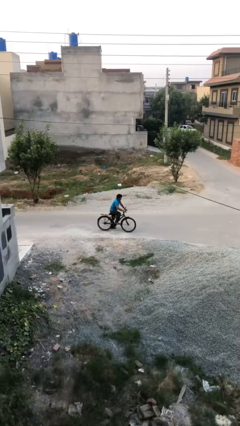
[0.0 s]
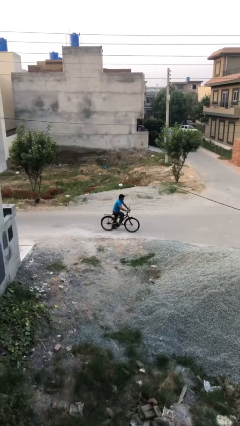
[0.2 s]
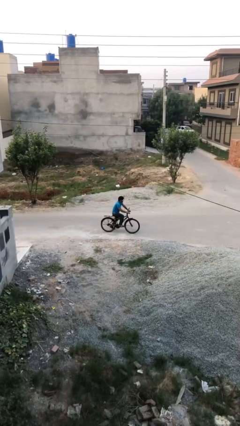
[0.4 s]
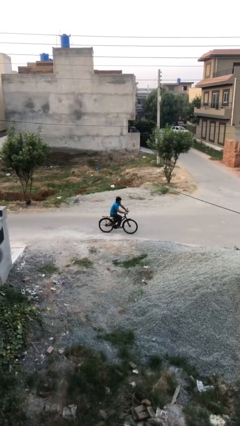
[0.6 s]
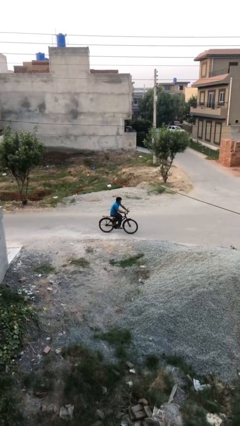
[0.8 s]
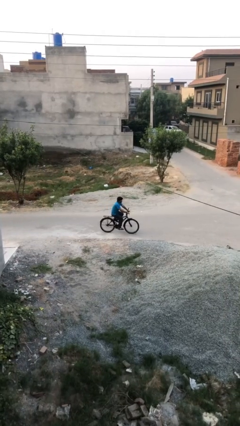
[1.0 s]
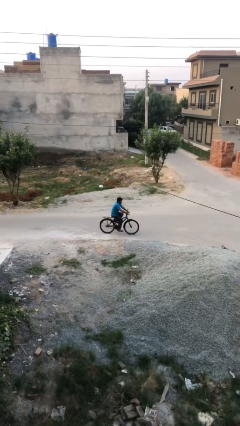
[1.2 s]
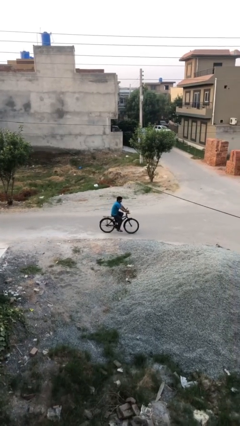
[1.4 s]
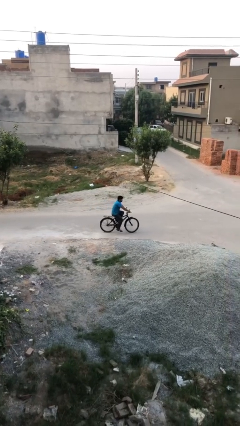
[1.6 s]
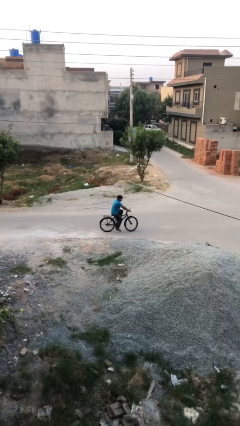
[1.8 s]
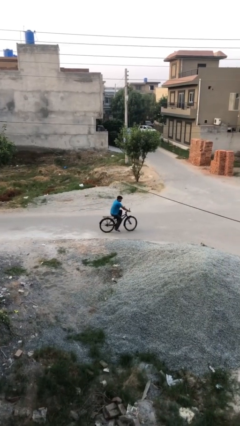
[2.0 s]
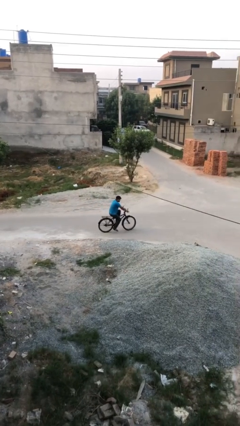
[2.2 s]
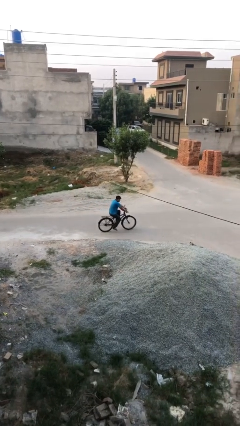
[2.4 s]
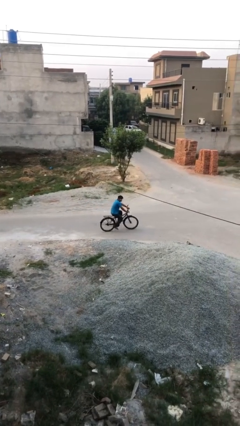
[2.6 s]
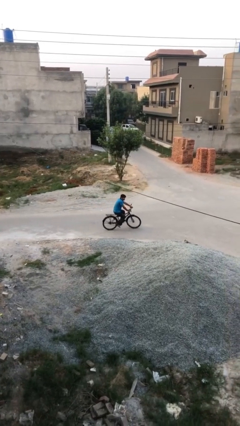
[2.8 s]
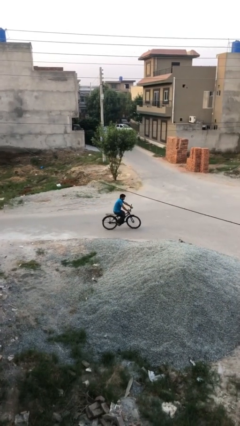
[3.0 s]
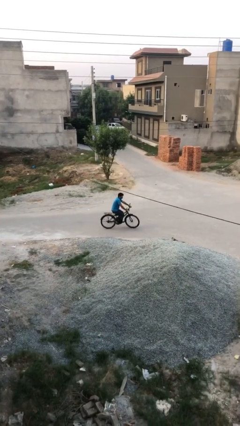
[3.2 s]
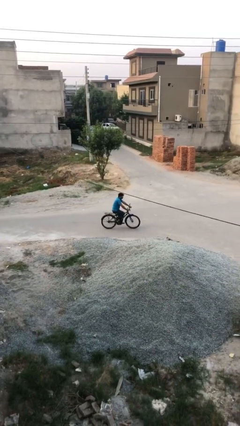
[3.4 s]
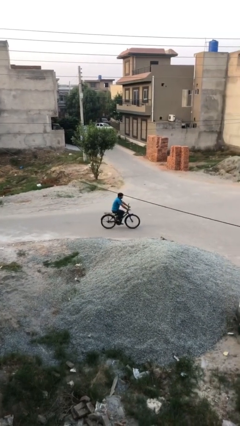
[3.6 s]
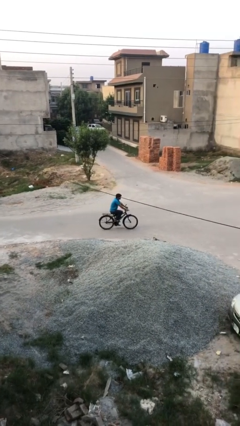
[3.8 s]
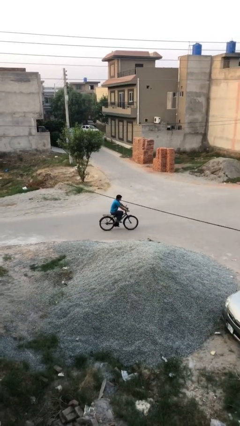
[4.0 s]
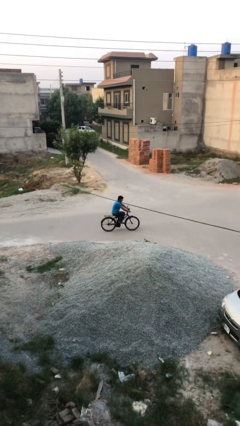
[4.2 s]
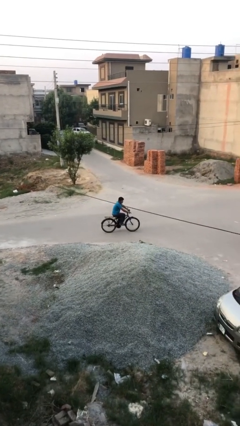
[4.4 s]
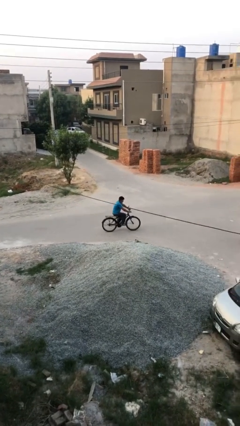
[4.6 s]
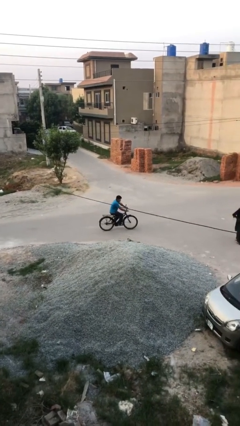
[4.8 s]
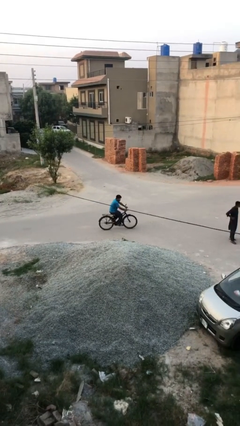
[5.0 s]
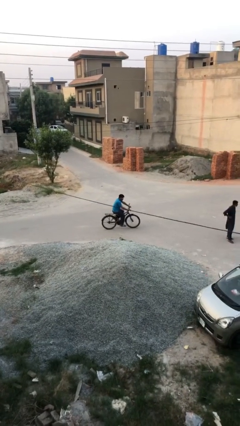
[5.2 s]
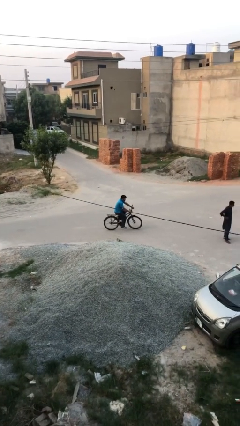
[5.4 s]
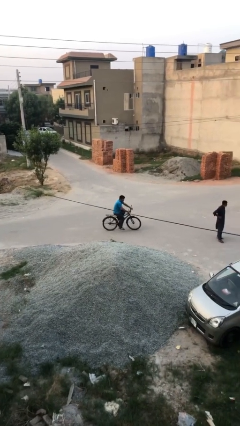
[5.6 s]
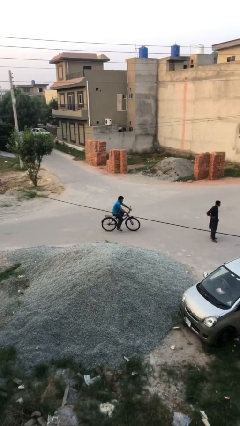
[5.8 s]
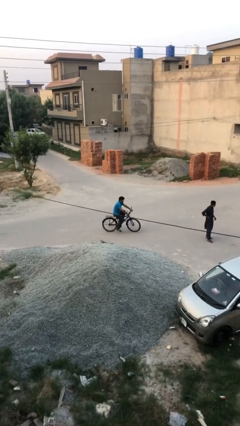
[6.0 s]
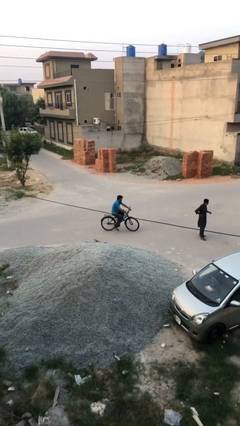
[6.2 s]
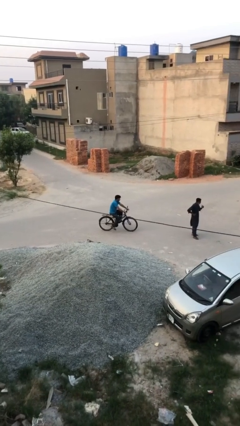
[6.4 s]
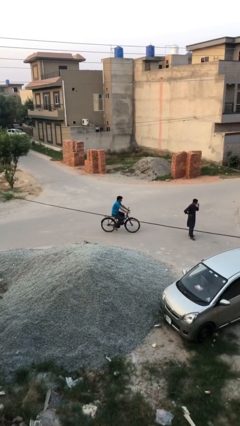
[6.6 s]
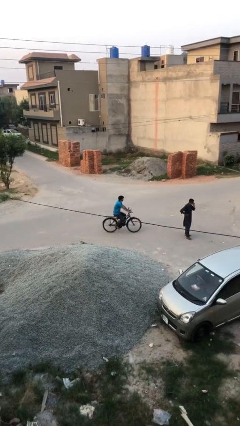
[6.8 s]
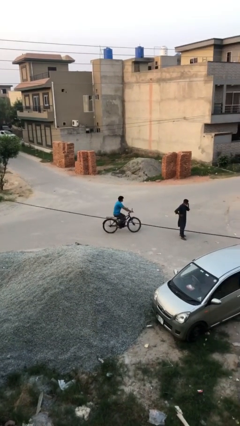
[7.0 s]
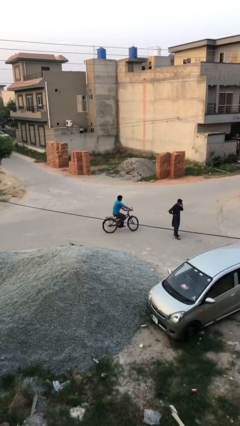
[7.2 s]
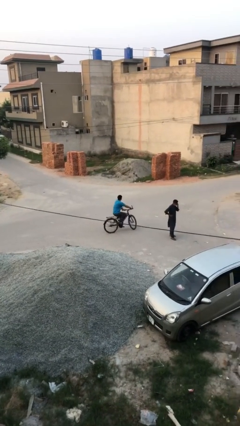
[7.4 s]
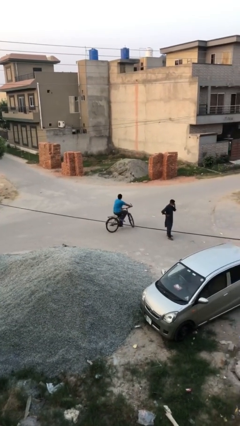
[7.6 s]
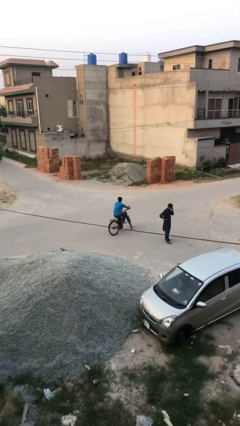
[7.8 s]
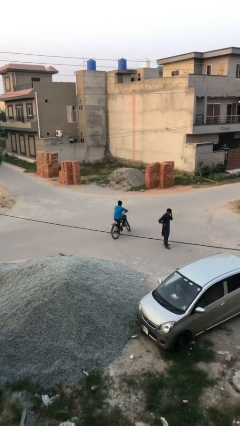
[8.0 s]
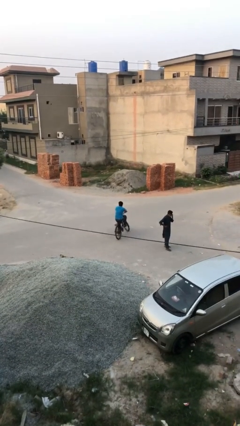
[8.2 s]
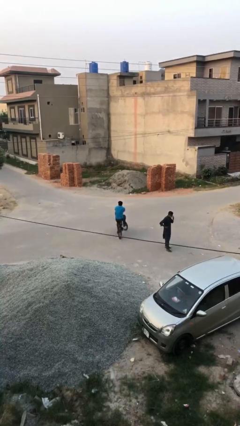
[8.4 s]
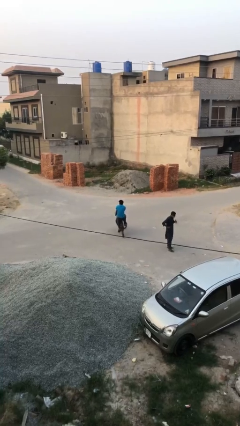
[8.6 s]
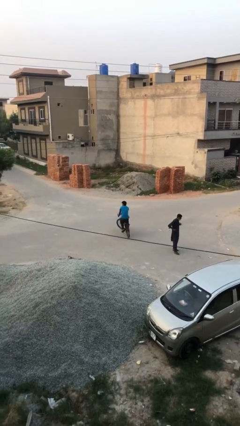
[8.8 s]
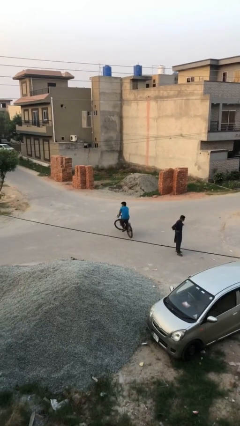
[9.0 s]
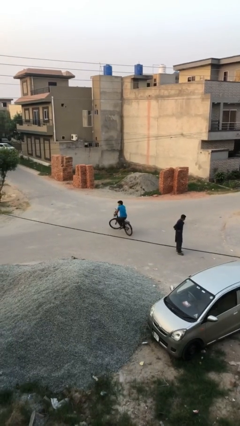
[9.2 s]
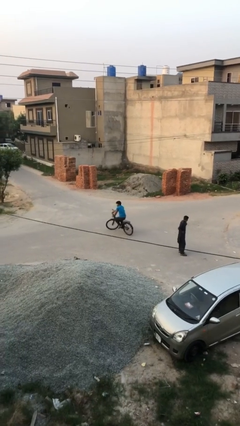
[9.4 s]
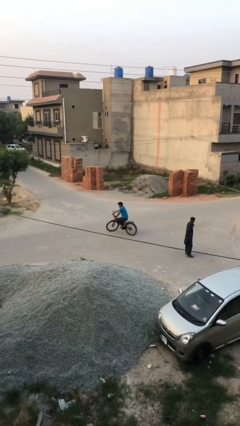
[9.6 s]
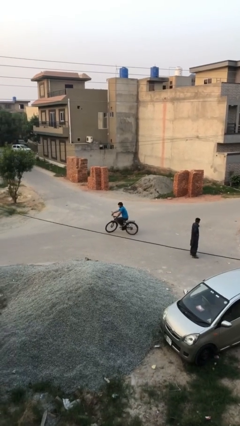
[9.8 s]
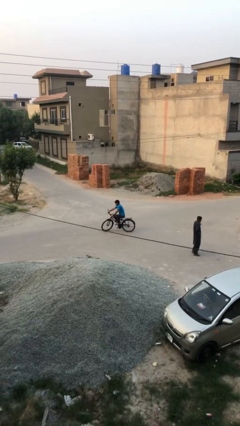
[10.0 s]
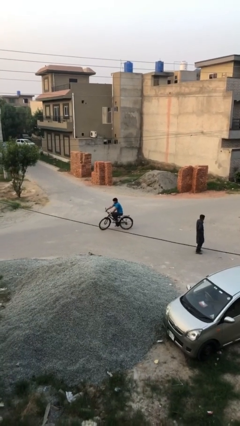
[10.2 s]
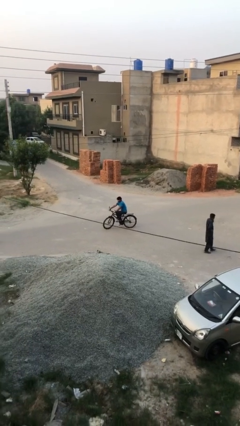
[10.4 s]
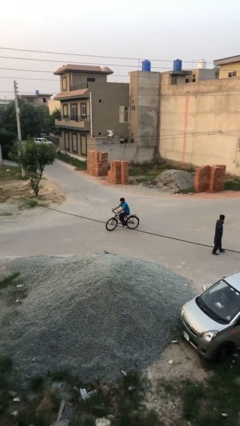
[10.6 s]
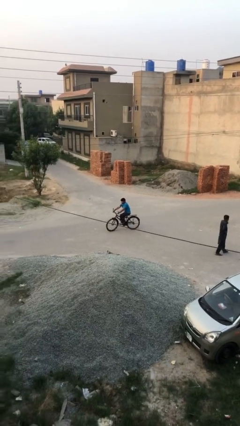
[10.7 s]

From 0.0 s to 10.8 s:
person rides bicycle

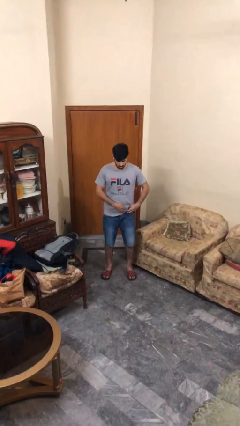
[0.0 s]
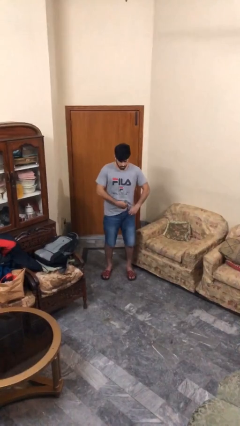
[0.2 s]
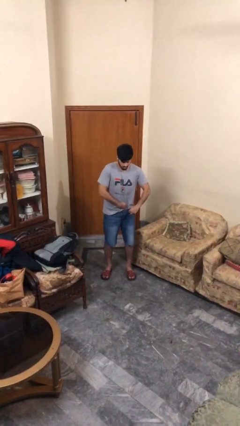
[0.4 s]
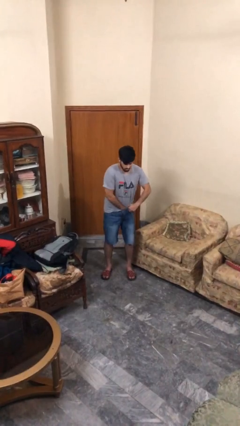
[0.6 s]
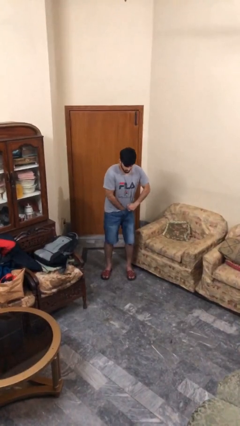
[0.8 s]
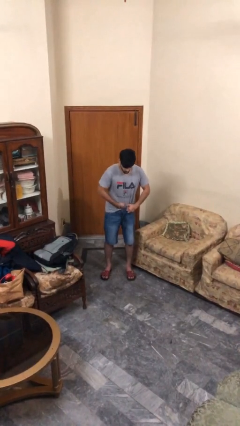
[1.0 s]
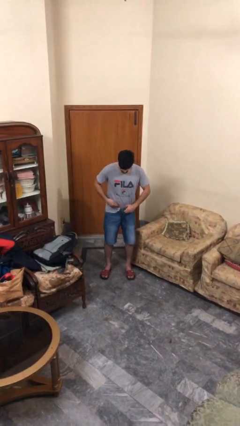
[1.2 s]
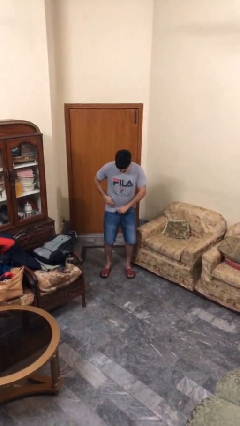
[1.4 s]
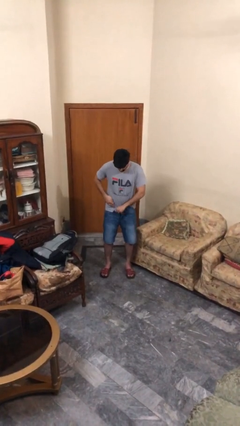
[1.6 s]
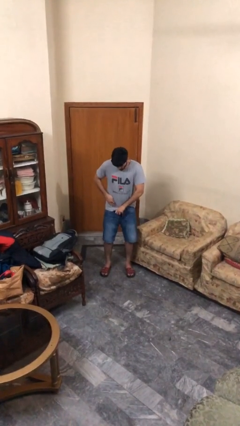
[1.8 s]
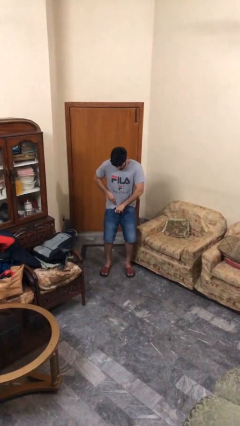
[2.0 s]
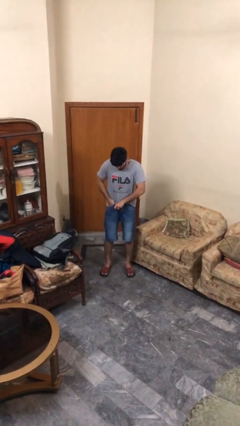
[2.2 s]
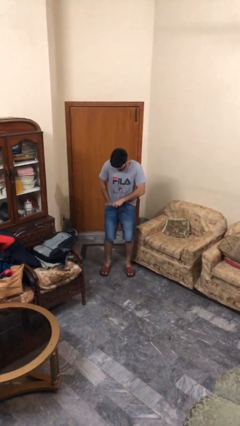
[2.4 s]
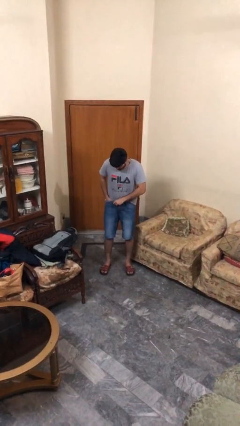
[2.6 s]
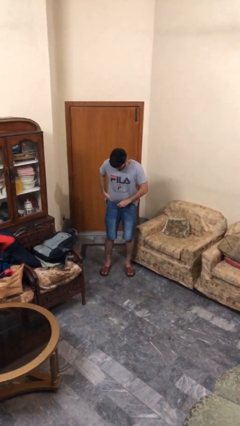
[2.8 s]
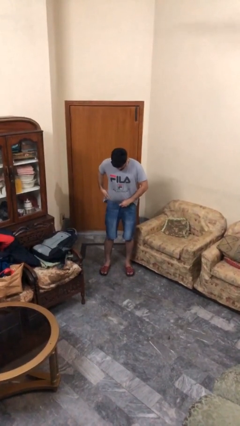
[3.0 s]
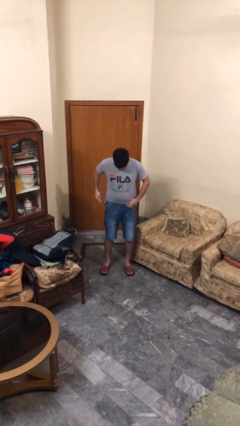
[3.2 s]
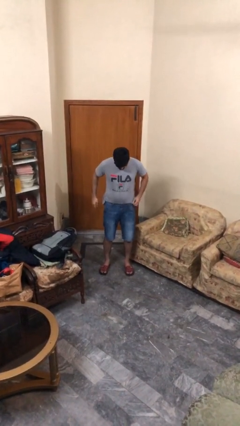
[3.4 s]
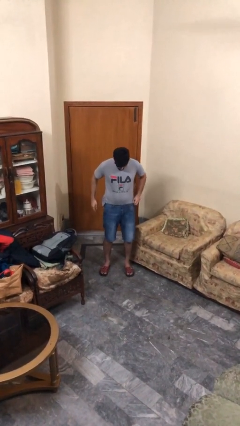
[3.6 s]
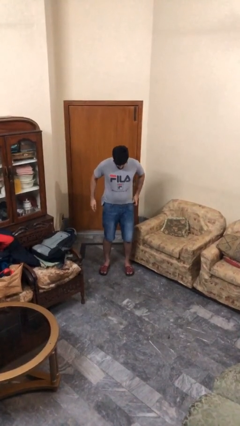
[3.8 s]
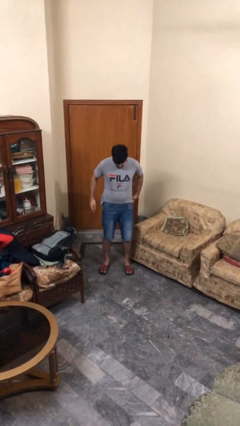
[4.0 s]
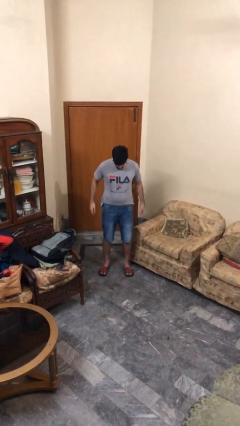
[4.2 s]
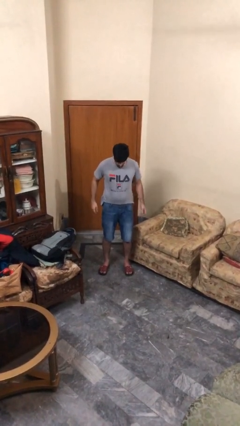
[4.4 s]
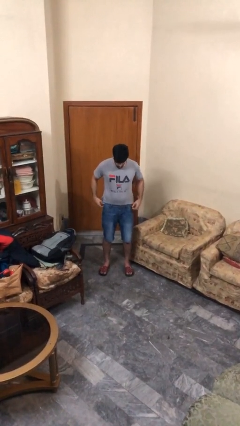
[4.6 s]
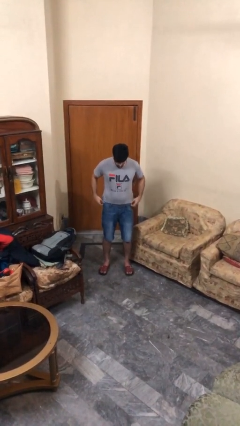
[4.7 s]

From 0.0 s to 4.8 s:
person tucks in shirt

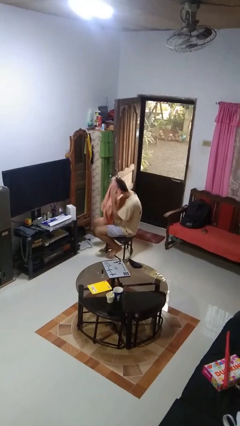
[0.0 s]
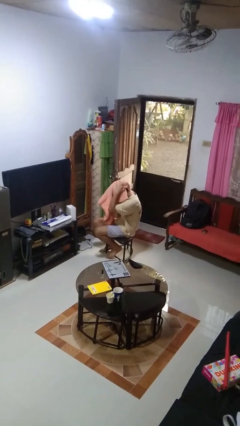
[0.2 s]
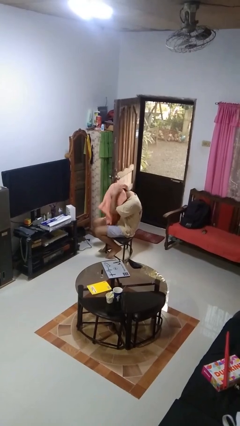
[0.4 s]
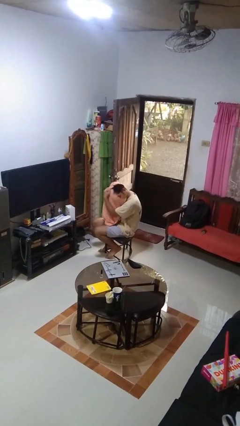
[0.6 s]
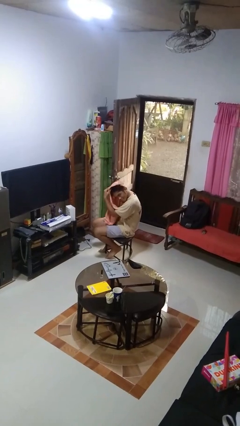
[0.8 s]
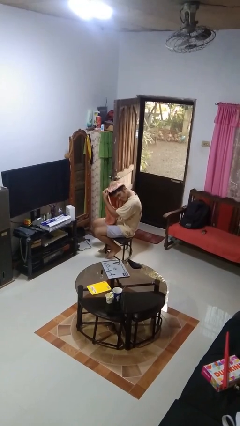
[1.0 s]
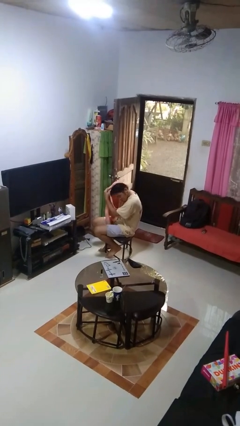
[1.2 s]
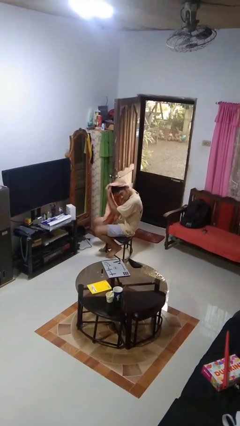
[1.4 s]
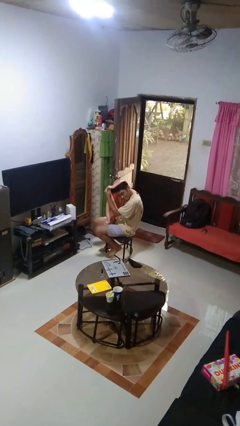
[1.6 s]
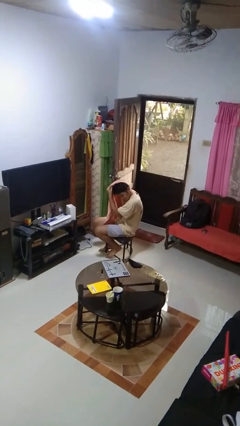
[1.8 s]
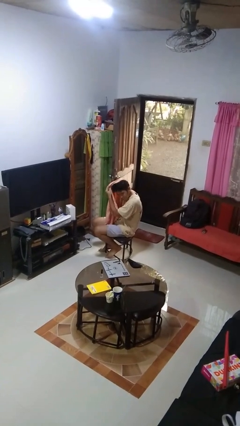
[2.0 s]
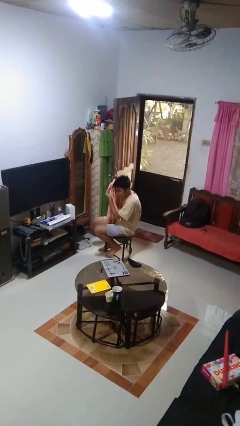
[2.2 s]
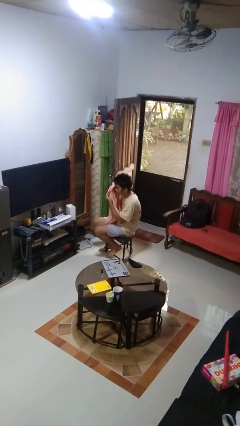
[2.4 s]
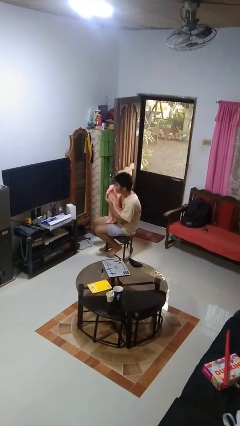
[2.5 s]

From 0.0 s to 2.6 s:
person dries hair with towel
